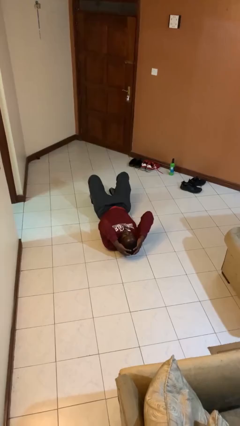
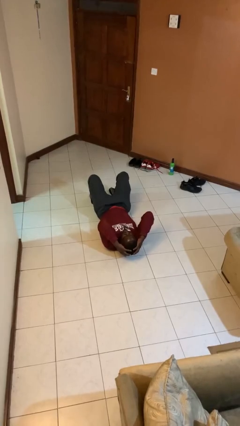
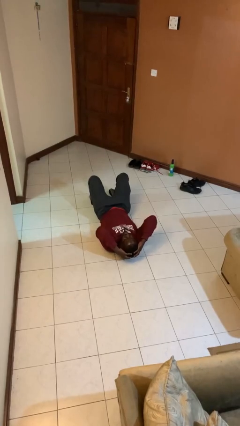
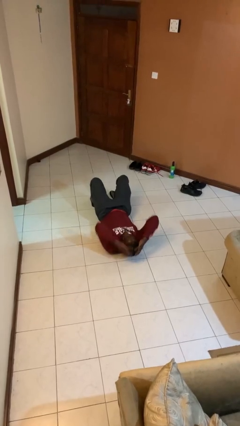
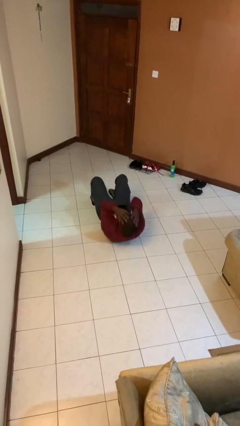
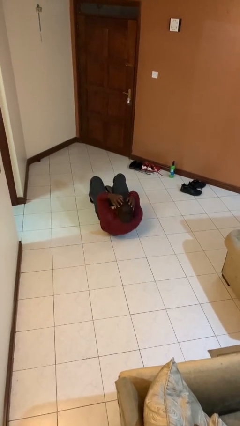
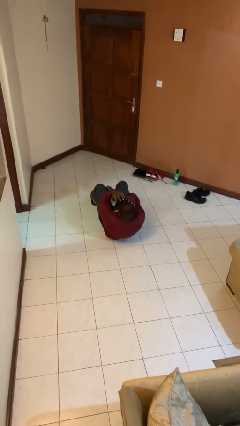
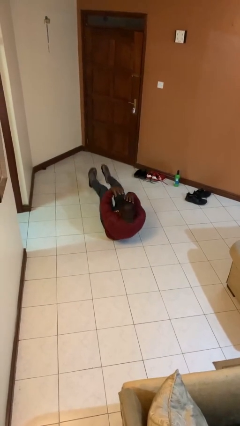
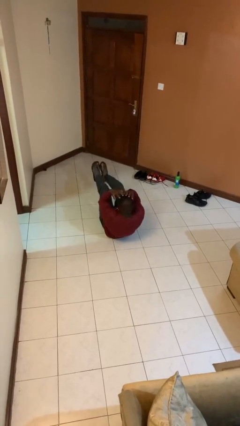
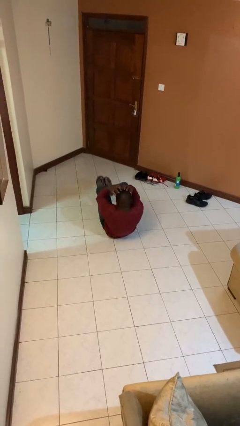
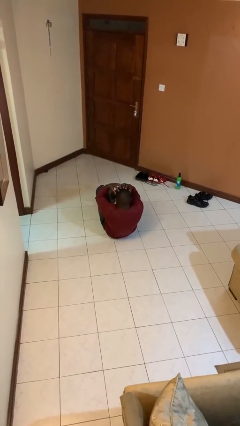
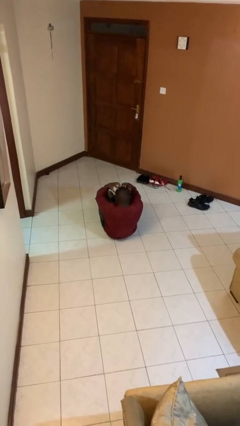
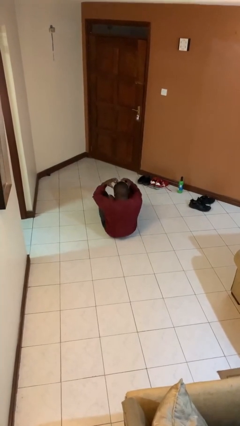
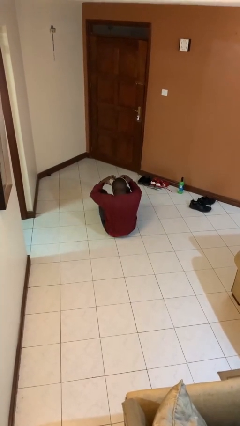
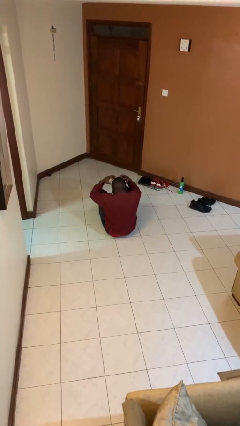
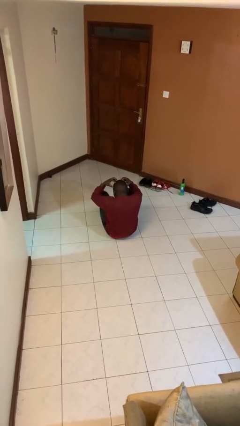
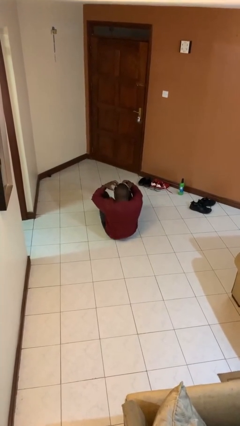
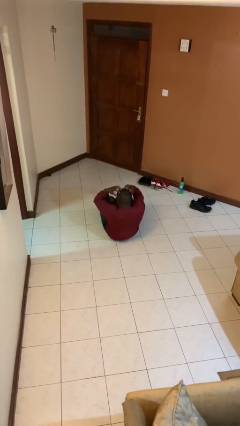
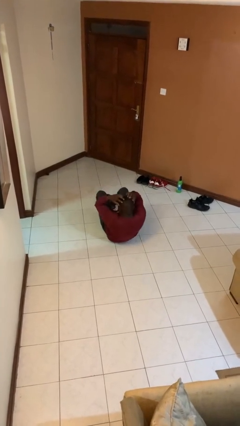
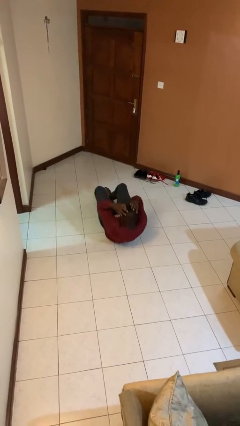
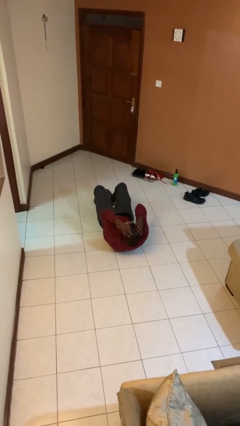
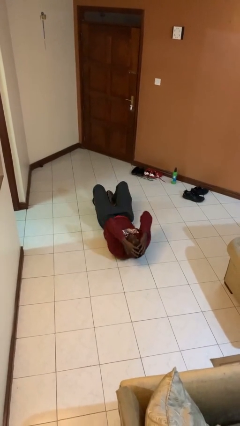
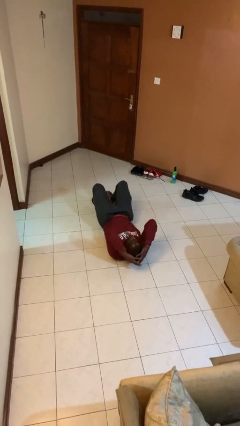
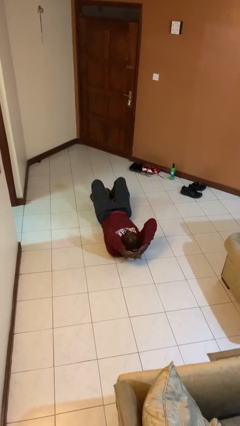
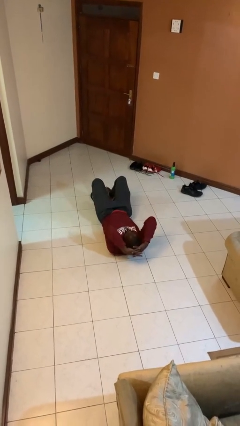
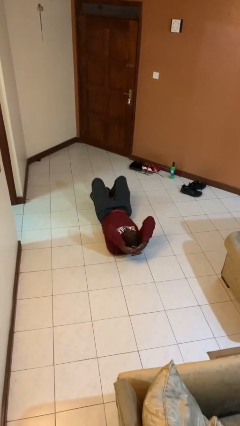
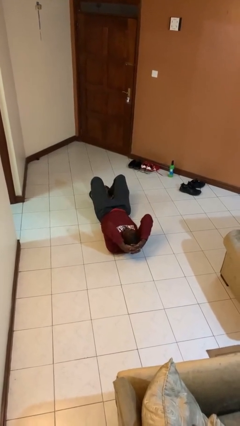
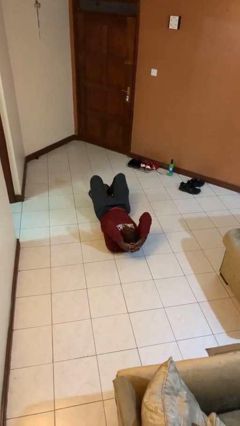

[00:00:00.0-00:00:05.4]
person exercises with situp

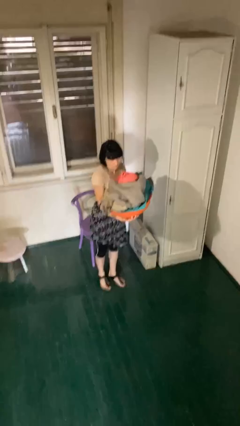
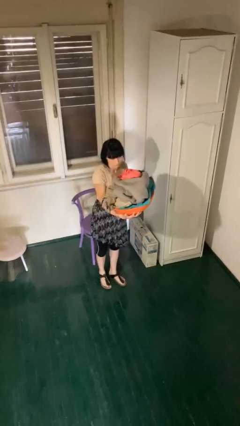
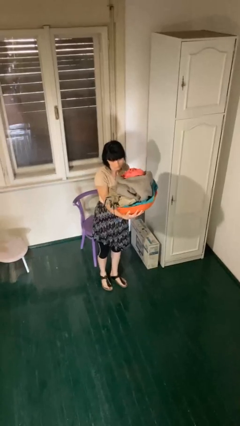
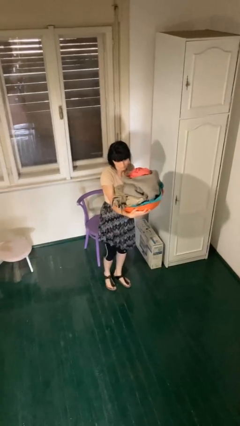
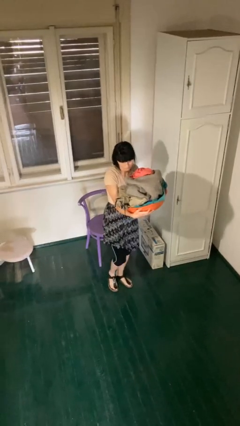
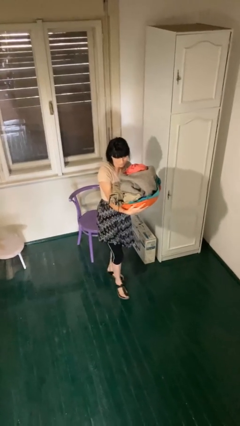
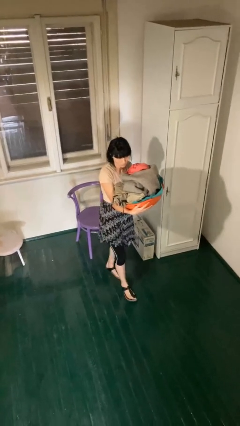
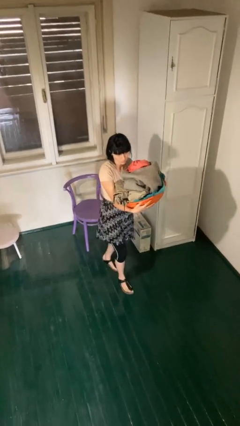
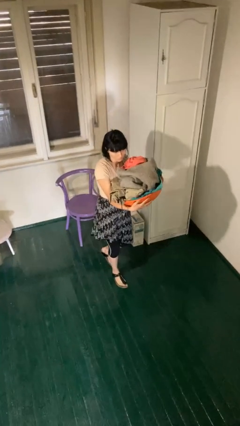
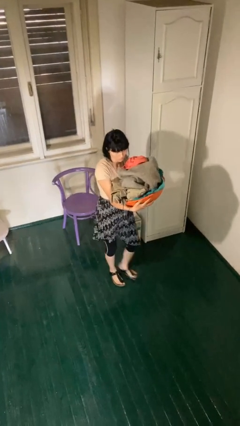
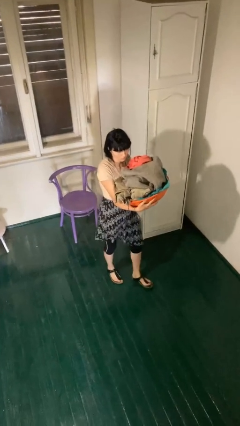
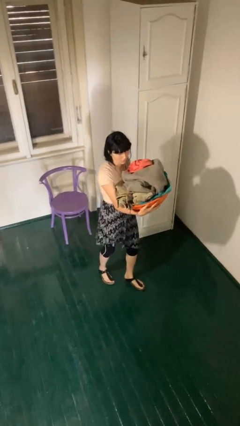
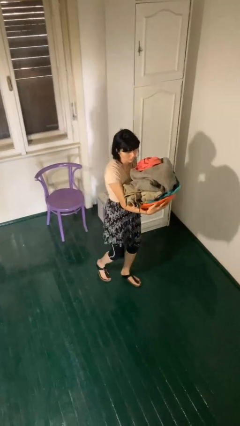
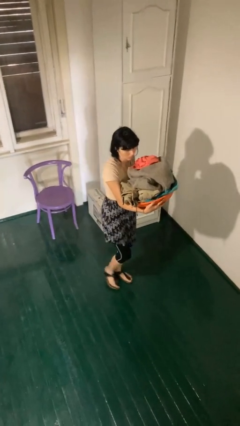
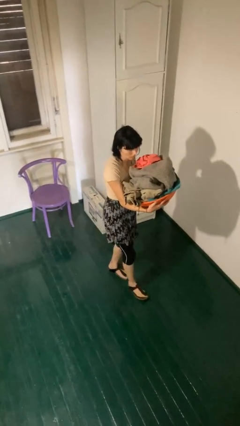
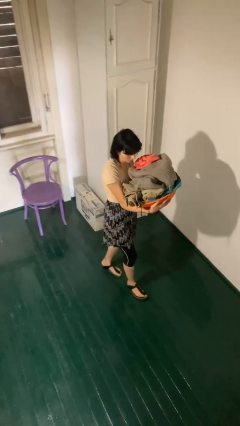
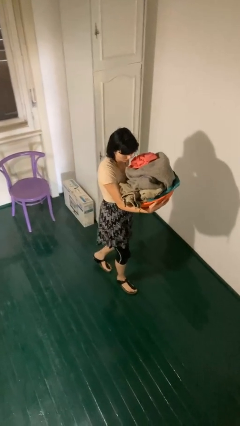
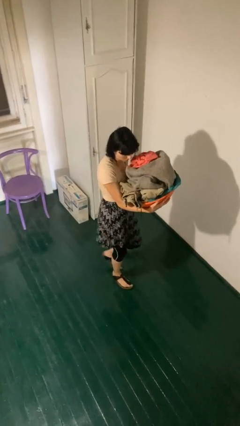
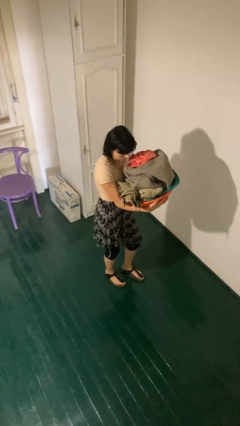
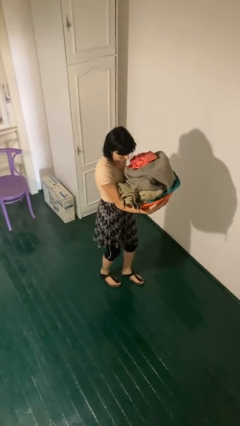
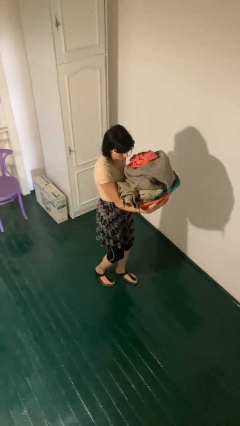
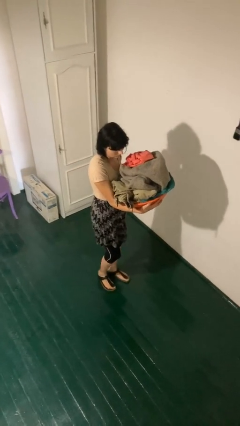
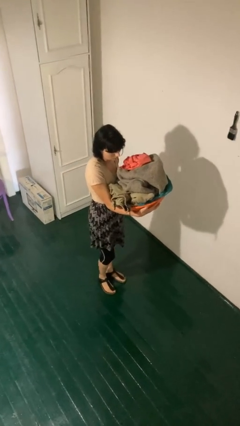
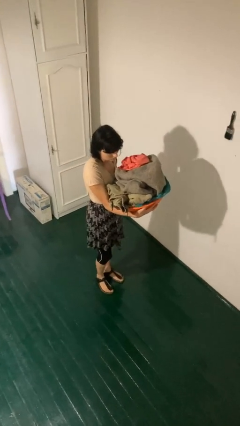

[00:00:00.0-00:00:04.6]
person carries laundry basket

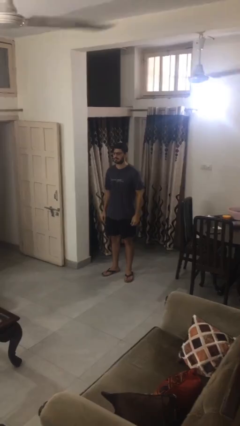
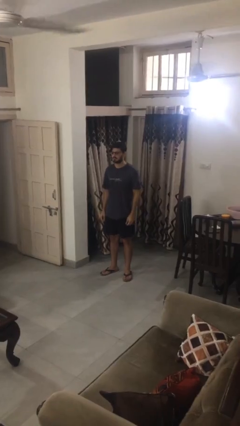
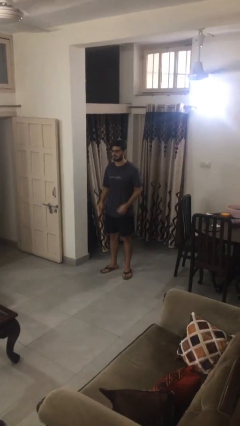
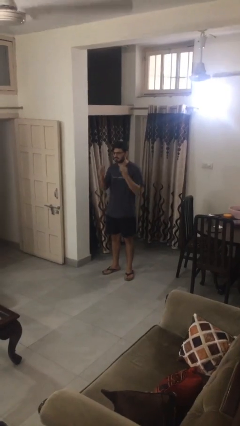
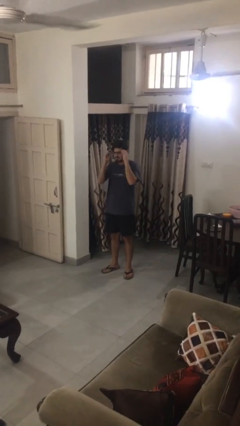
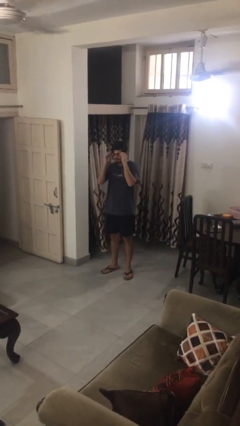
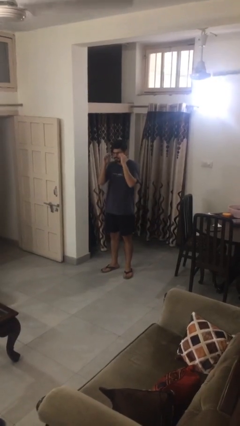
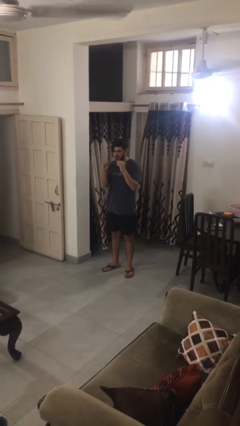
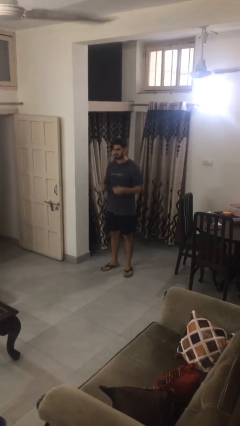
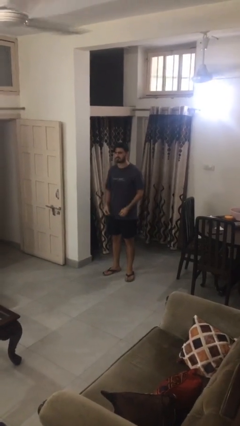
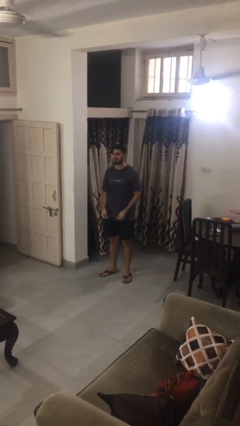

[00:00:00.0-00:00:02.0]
person takes off glasses

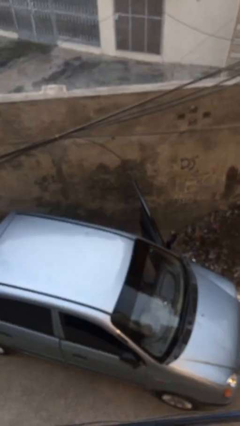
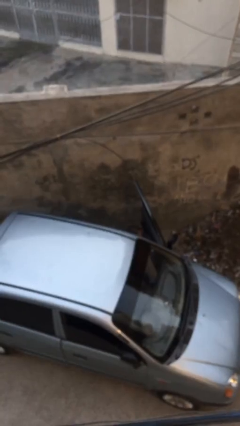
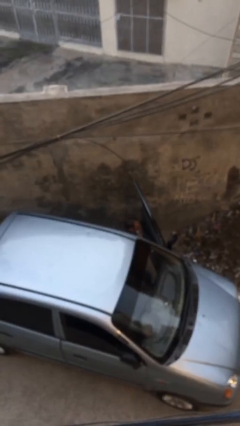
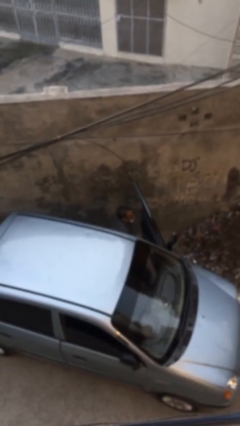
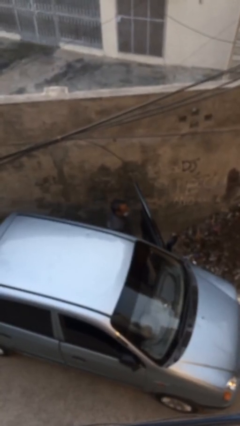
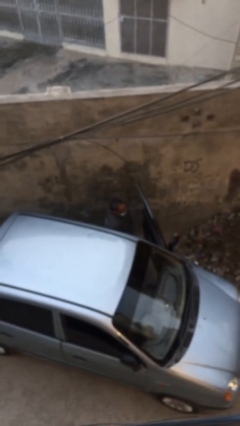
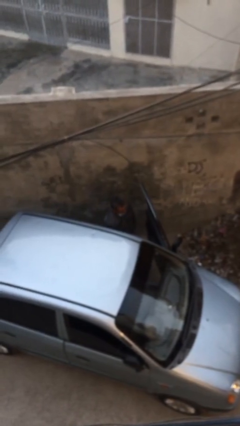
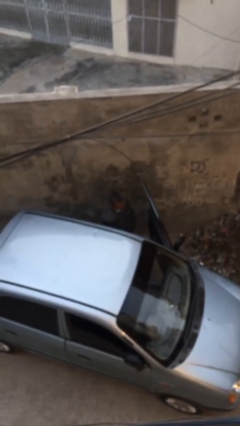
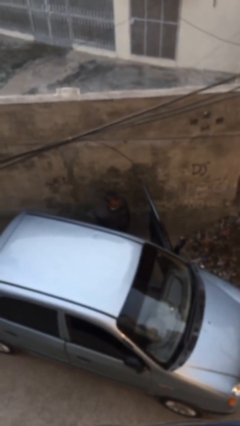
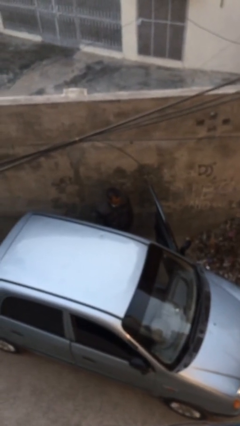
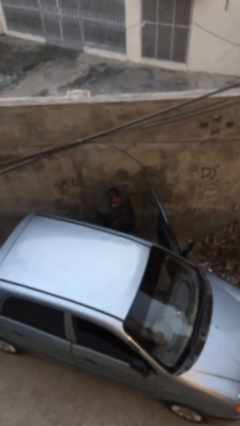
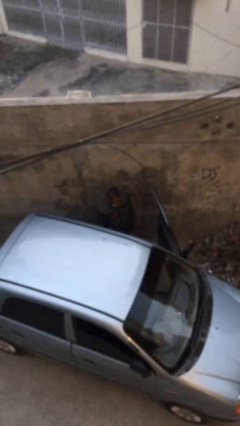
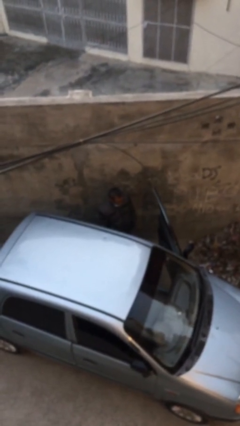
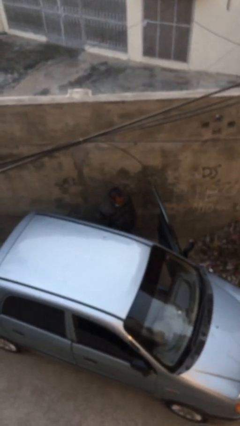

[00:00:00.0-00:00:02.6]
person exits car

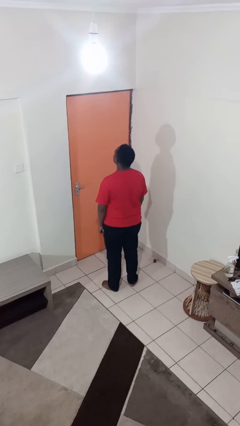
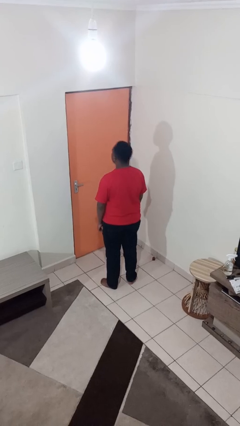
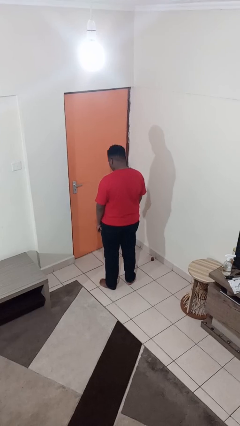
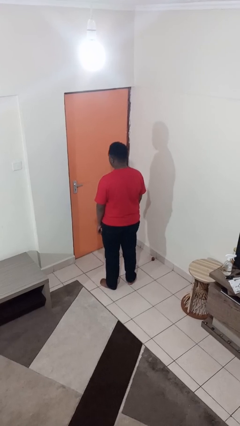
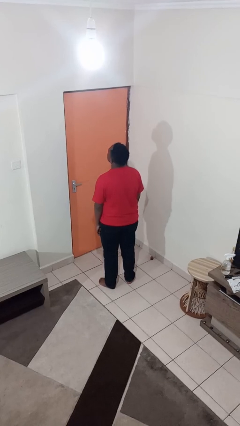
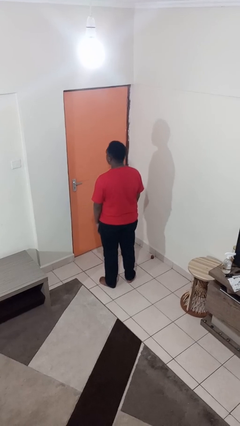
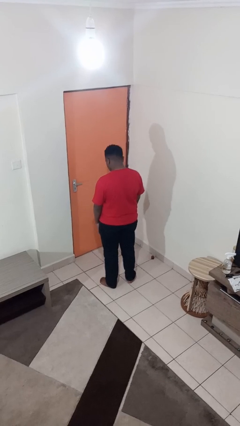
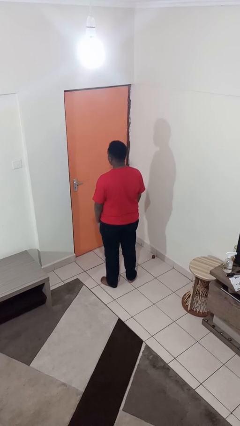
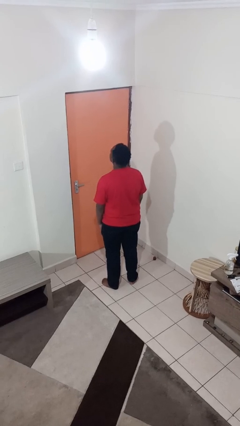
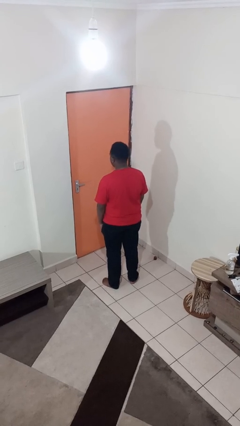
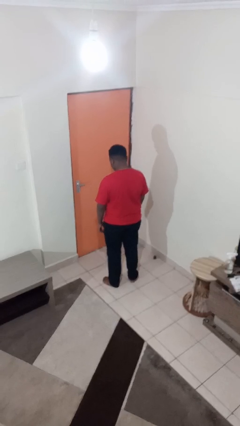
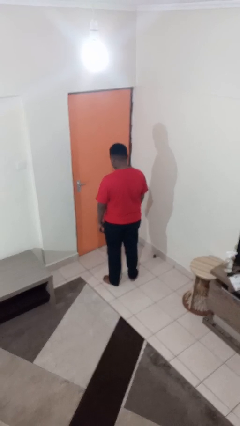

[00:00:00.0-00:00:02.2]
person nods head

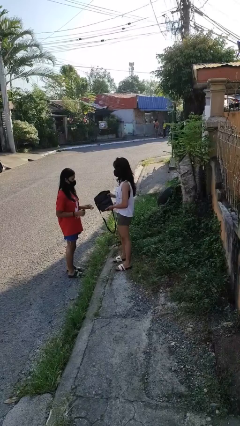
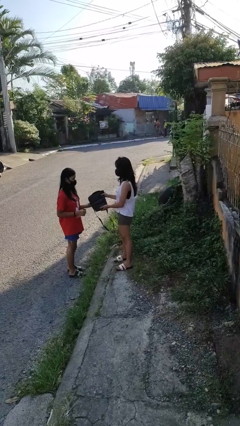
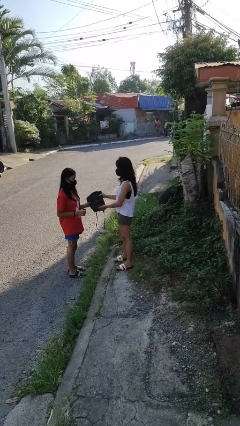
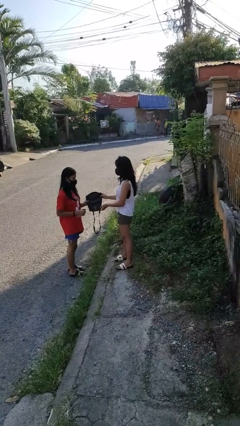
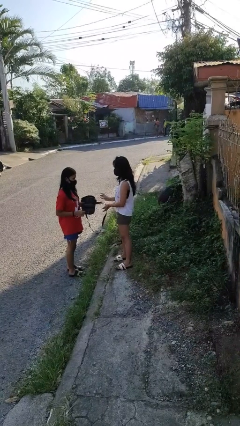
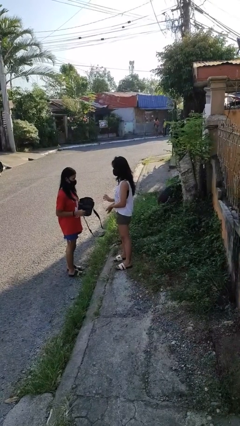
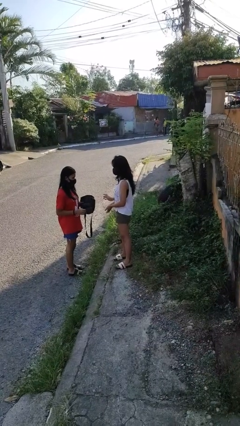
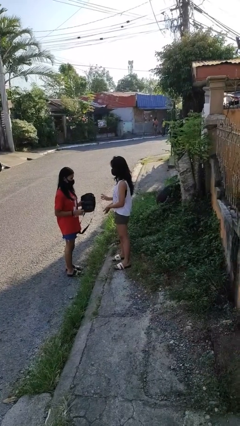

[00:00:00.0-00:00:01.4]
person transfers object to person
